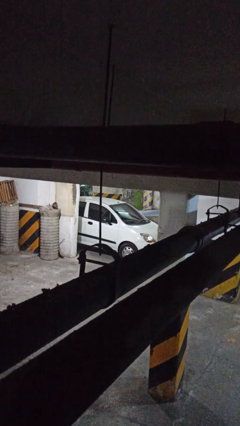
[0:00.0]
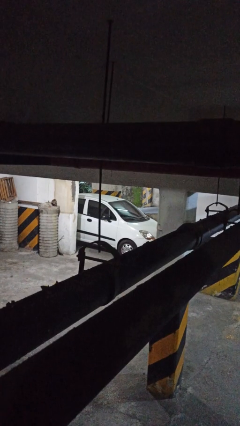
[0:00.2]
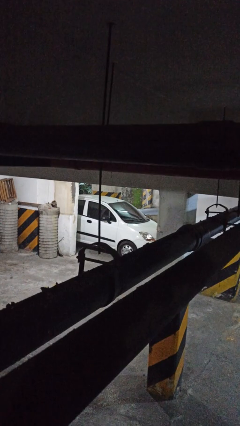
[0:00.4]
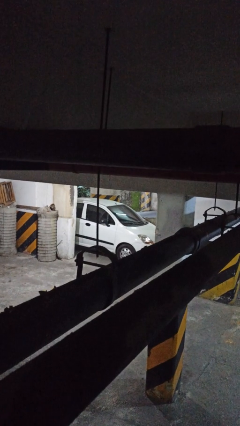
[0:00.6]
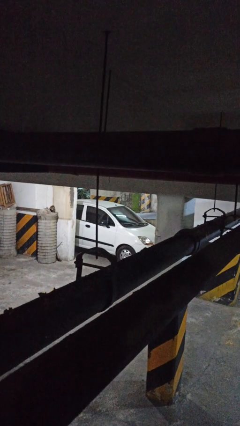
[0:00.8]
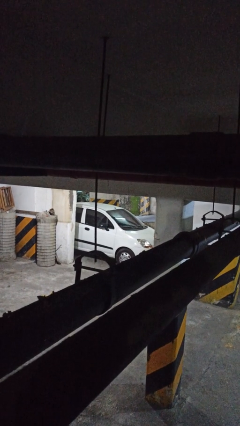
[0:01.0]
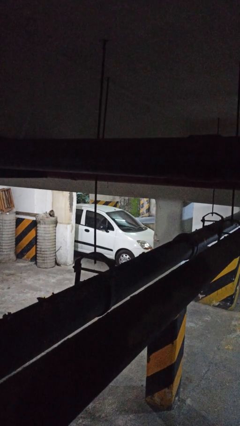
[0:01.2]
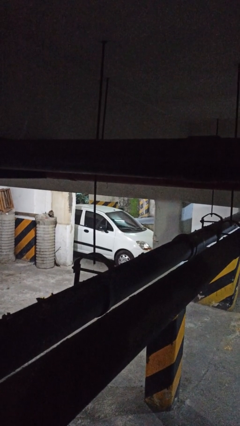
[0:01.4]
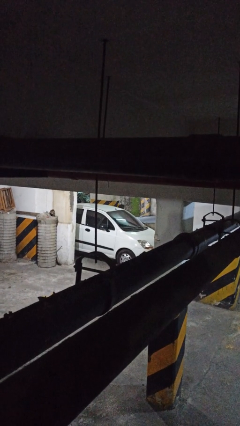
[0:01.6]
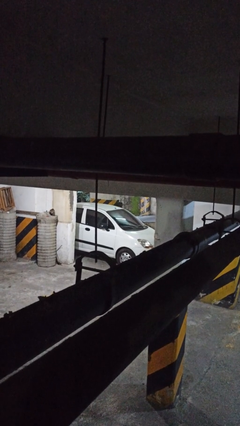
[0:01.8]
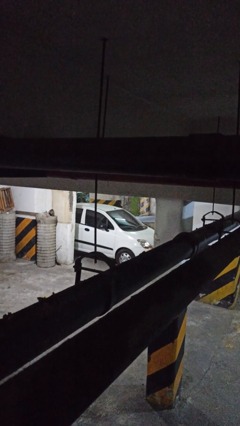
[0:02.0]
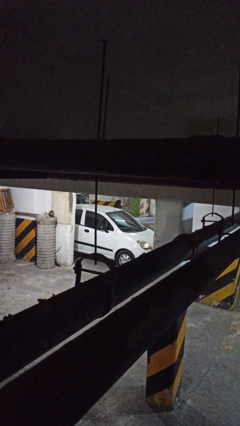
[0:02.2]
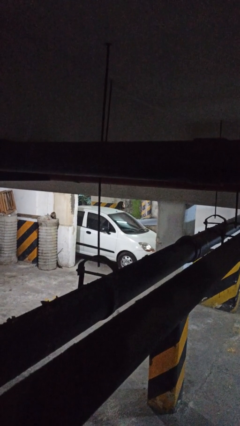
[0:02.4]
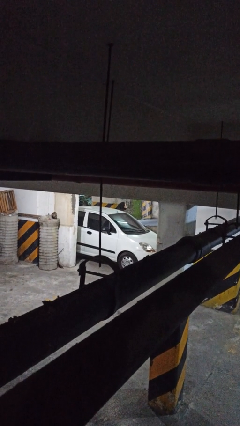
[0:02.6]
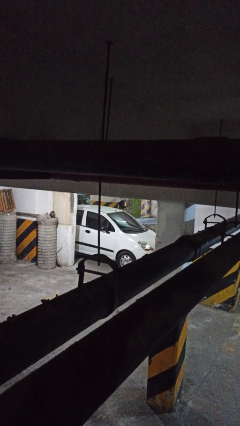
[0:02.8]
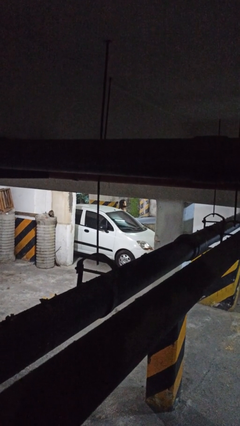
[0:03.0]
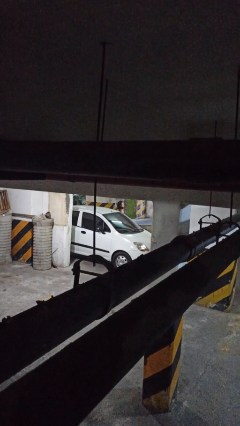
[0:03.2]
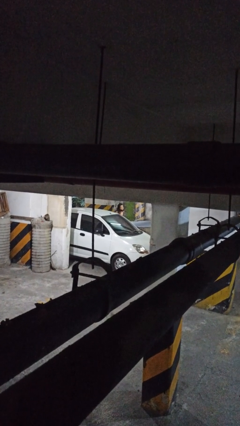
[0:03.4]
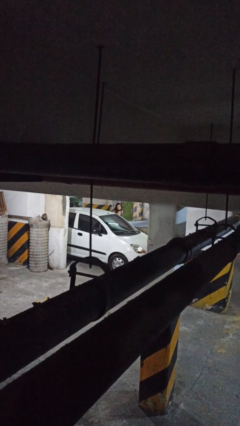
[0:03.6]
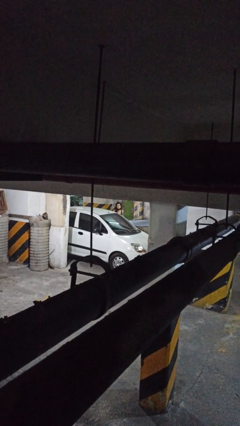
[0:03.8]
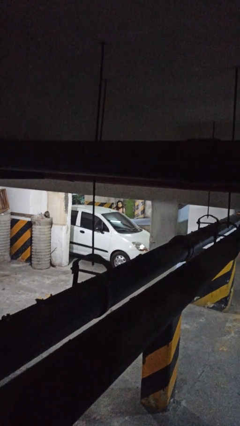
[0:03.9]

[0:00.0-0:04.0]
person exits car

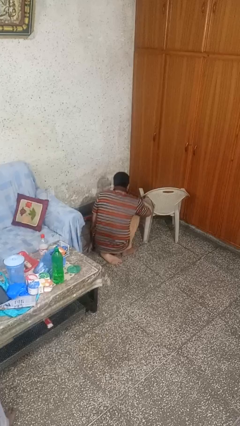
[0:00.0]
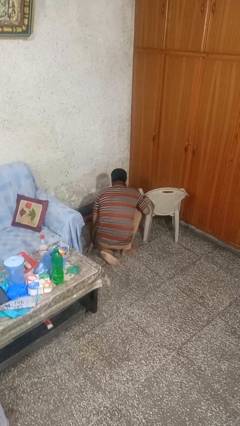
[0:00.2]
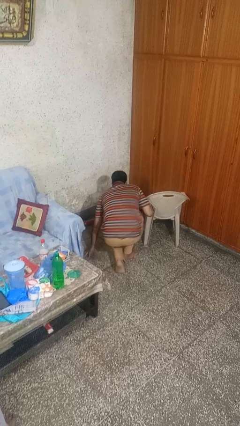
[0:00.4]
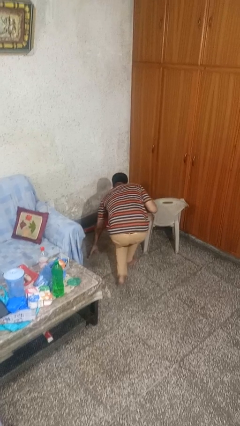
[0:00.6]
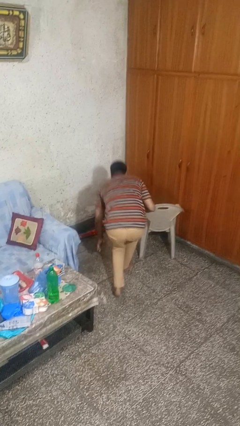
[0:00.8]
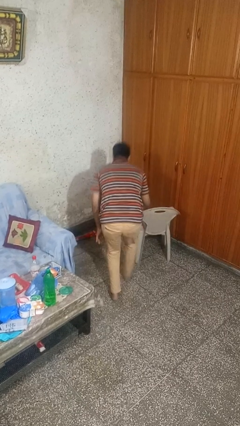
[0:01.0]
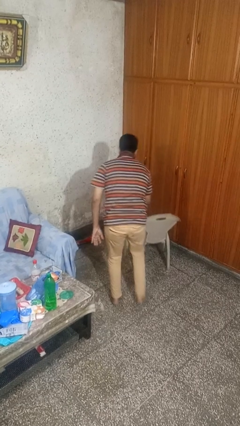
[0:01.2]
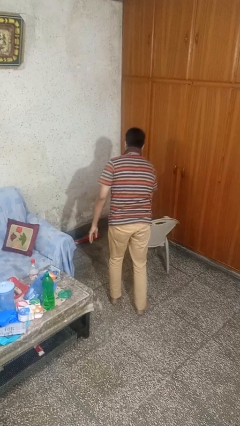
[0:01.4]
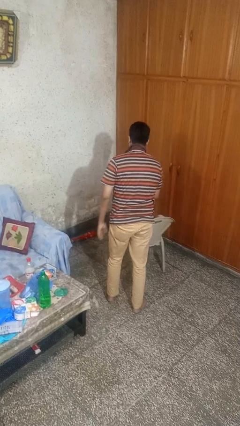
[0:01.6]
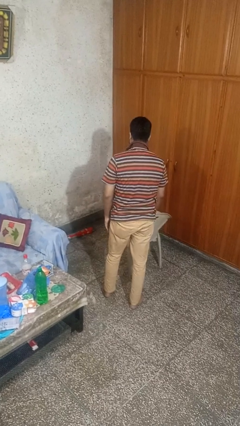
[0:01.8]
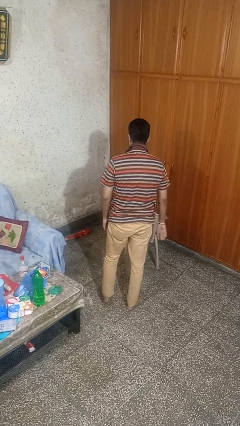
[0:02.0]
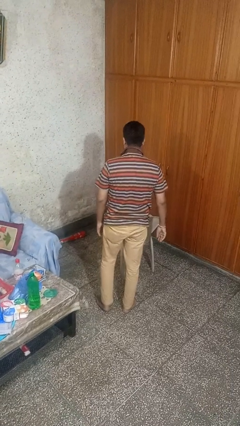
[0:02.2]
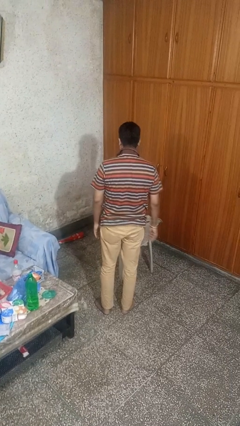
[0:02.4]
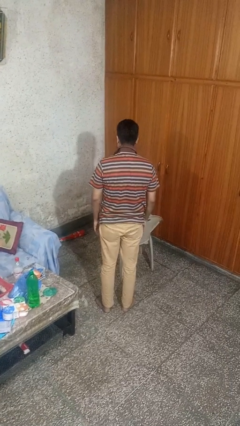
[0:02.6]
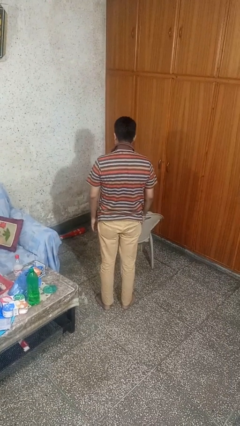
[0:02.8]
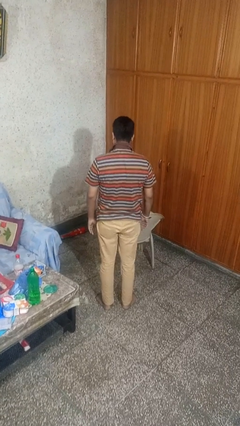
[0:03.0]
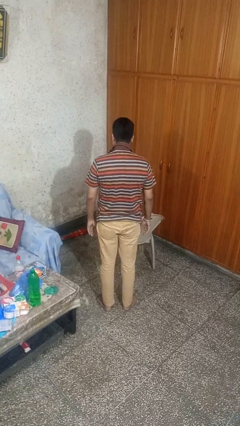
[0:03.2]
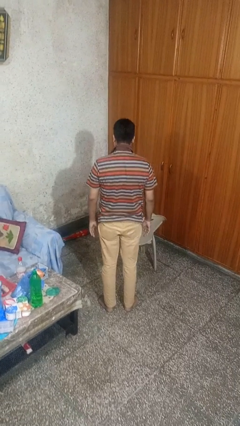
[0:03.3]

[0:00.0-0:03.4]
person stands up from floor

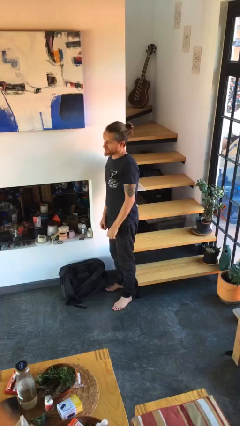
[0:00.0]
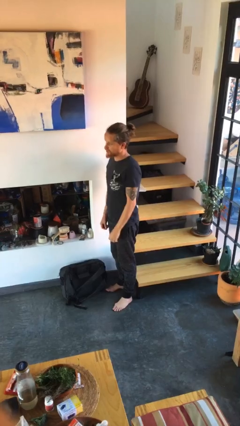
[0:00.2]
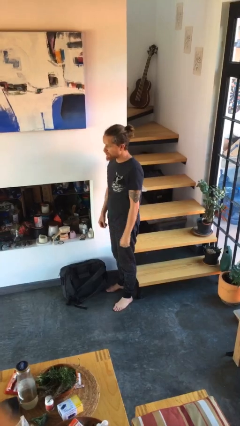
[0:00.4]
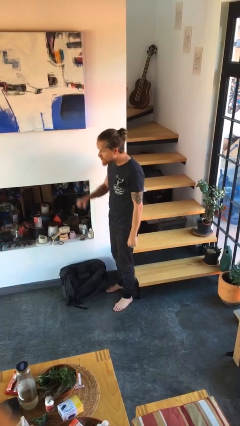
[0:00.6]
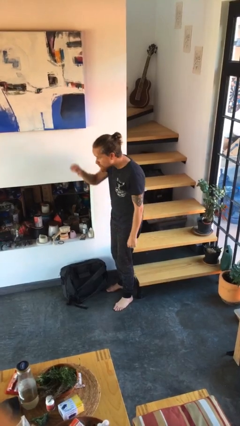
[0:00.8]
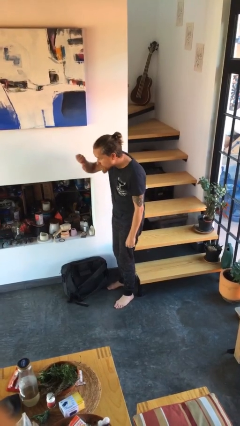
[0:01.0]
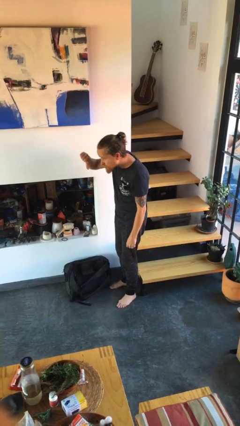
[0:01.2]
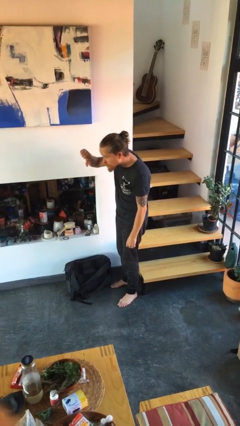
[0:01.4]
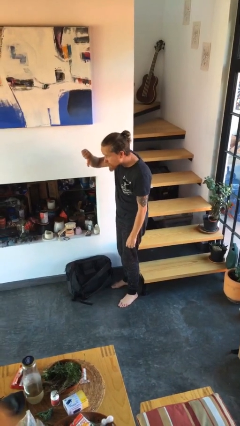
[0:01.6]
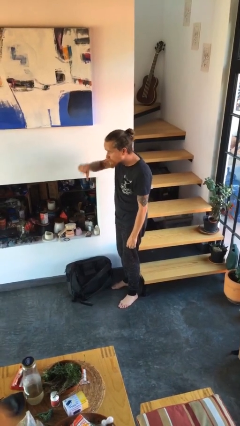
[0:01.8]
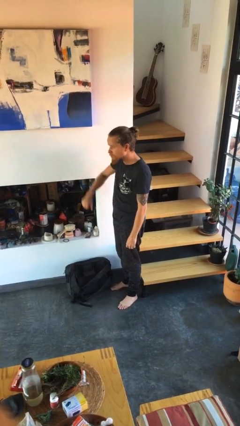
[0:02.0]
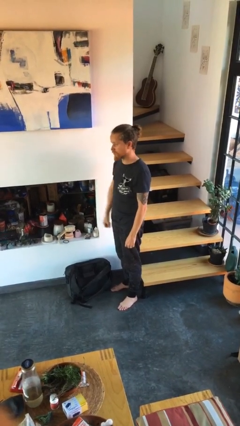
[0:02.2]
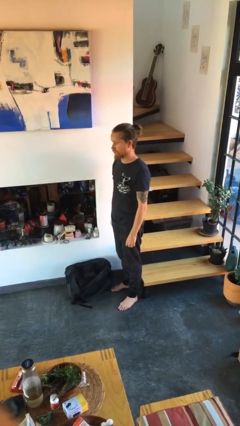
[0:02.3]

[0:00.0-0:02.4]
person gestures thumbs down

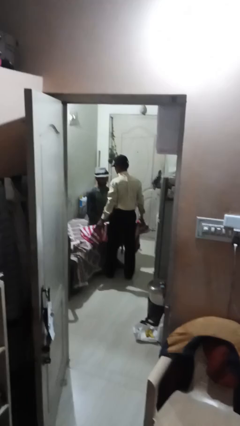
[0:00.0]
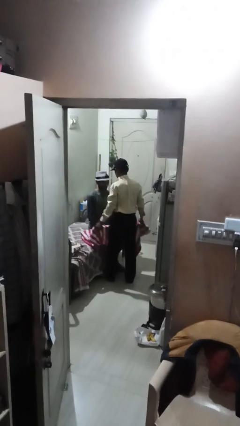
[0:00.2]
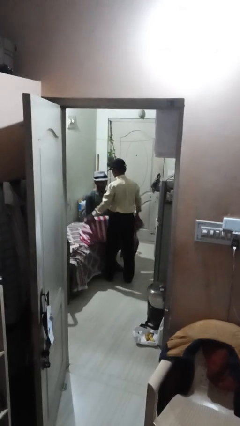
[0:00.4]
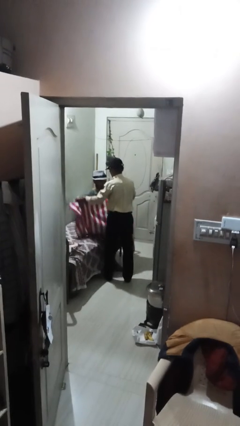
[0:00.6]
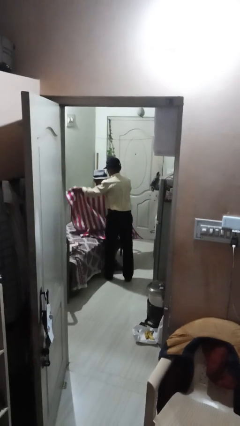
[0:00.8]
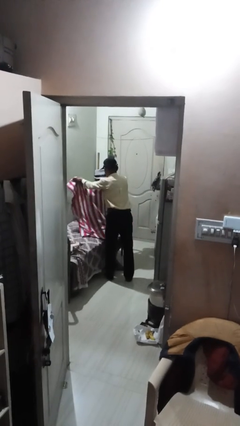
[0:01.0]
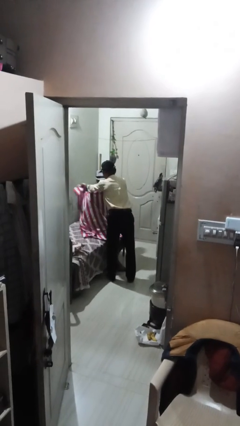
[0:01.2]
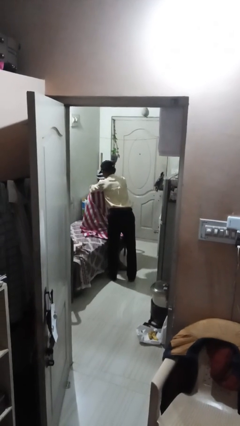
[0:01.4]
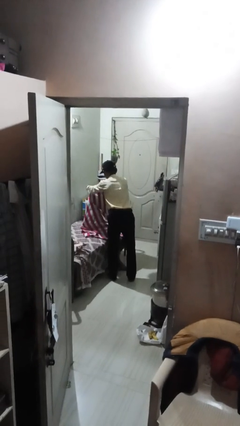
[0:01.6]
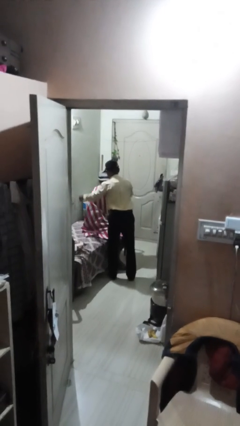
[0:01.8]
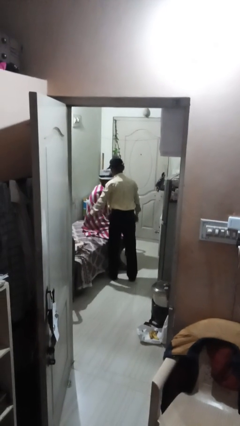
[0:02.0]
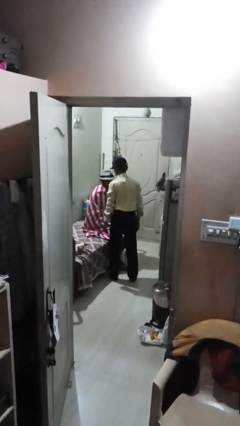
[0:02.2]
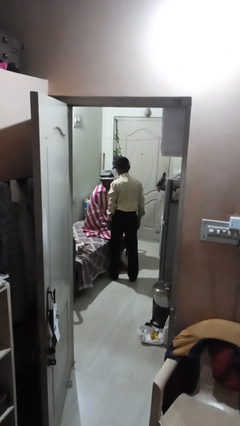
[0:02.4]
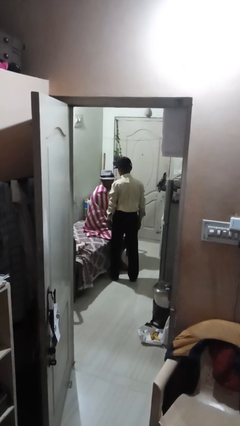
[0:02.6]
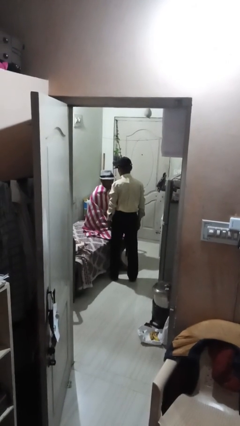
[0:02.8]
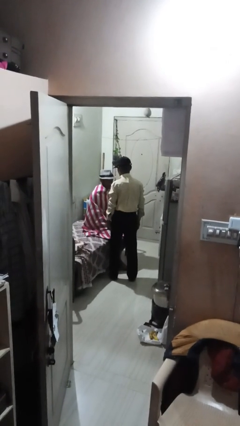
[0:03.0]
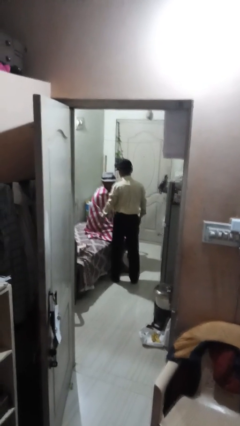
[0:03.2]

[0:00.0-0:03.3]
person covers friend with blanket

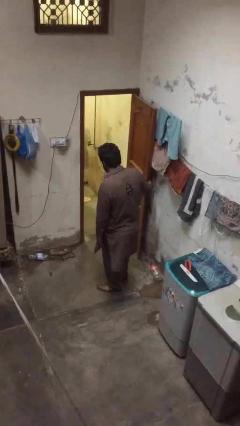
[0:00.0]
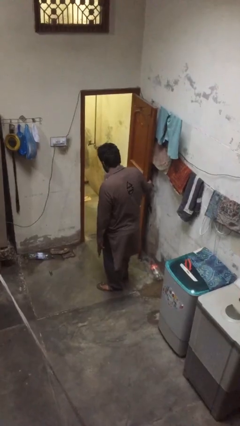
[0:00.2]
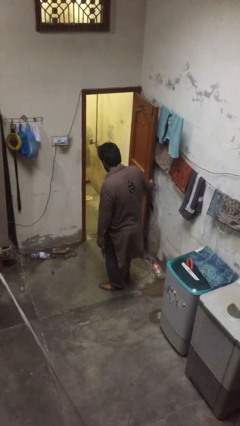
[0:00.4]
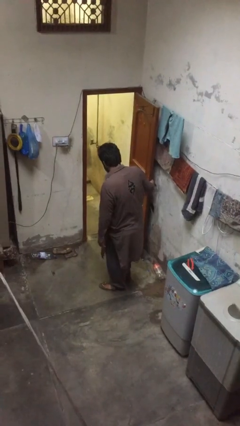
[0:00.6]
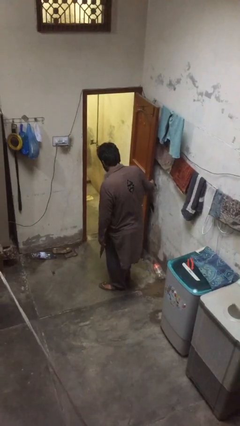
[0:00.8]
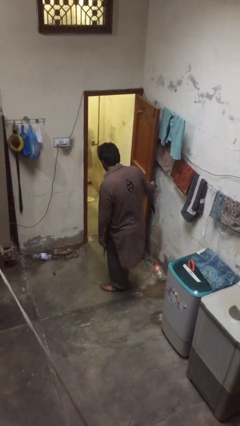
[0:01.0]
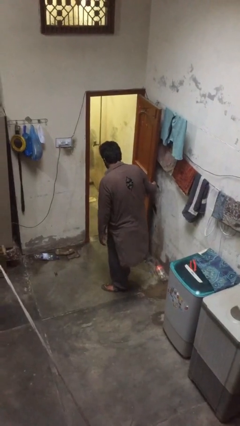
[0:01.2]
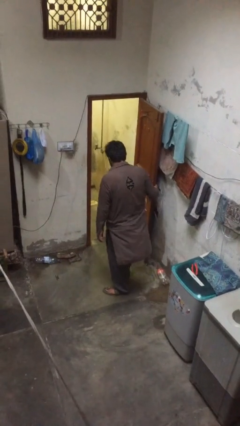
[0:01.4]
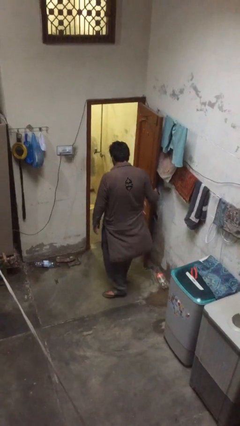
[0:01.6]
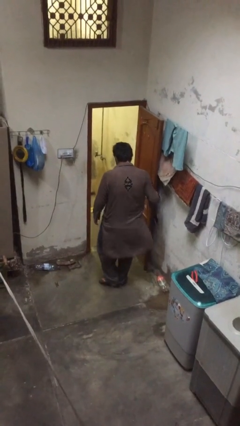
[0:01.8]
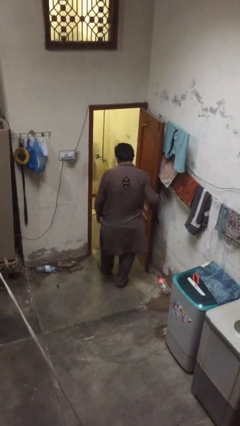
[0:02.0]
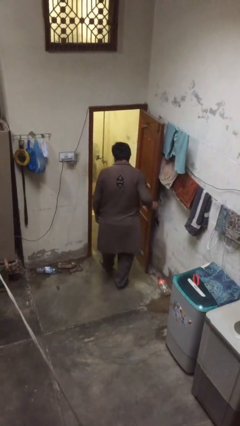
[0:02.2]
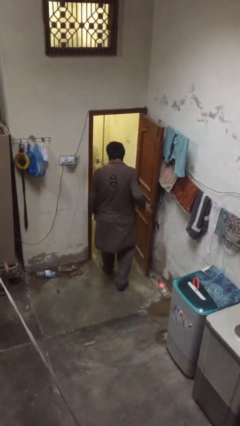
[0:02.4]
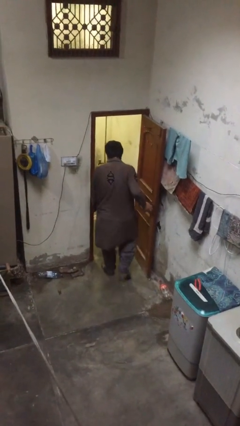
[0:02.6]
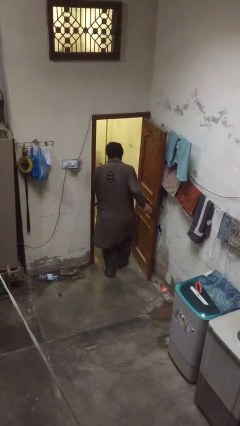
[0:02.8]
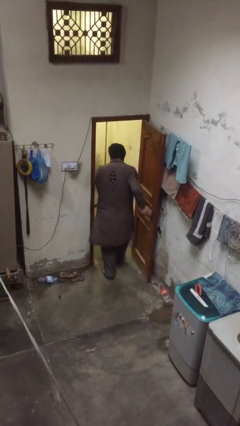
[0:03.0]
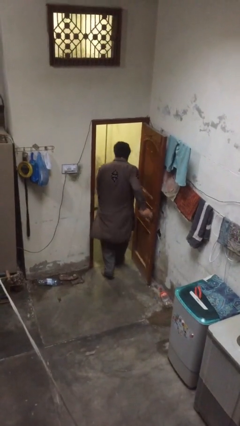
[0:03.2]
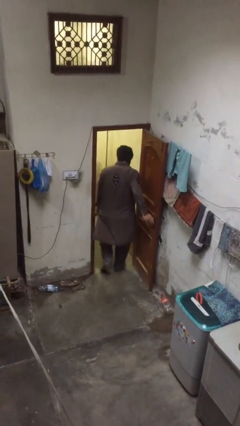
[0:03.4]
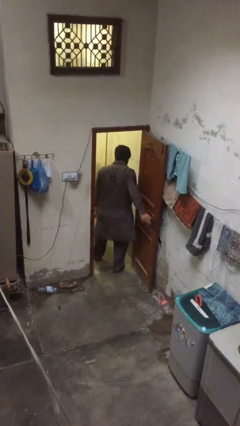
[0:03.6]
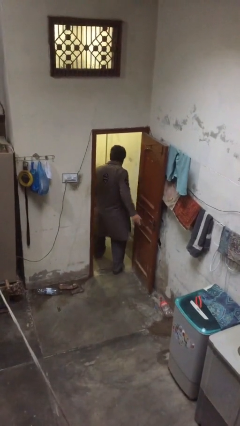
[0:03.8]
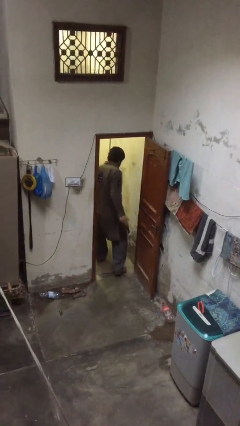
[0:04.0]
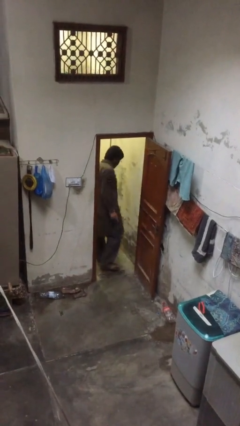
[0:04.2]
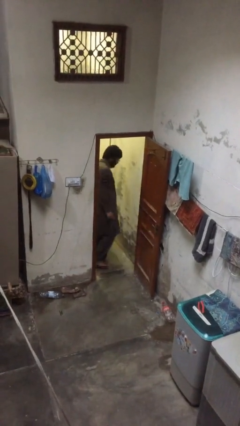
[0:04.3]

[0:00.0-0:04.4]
person exits scene through structure

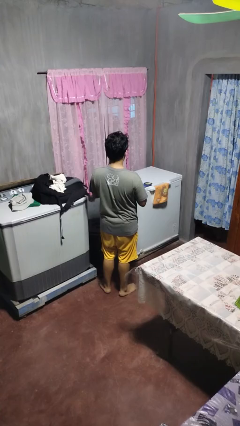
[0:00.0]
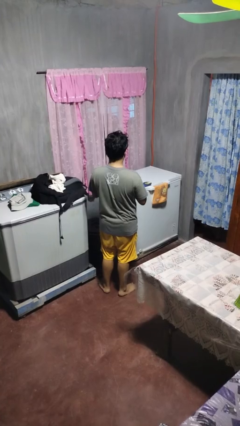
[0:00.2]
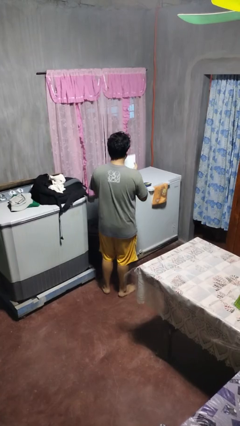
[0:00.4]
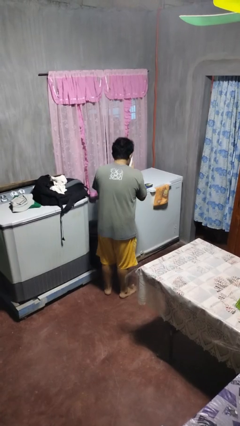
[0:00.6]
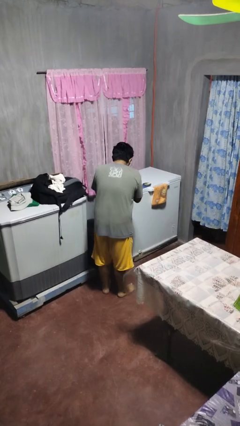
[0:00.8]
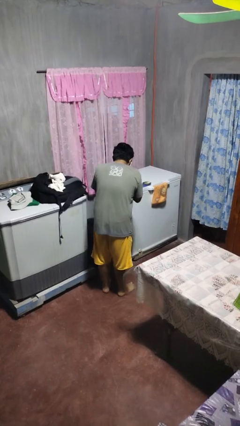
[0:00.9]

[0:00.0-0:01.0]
person blows nose
